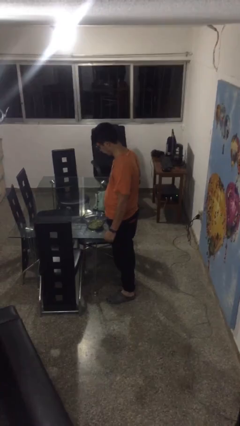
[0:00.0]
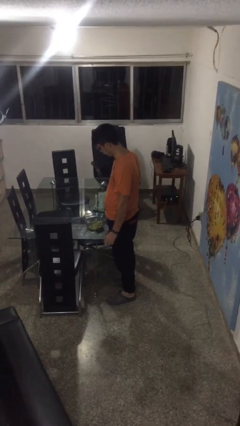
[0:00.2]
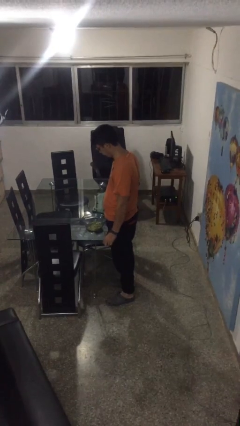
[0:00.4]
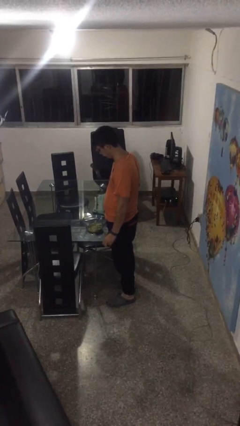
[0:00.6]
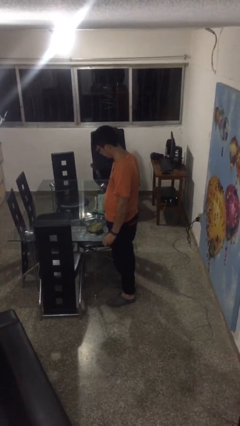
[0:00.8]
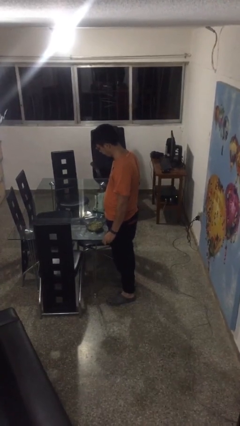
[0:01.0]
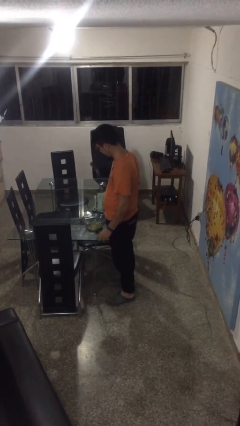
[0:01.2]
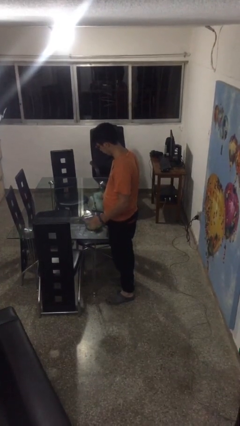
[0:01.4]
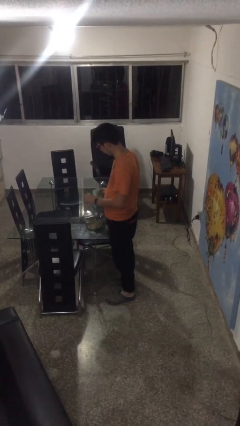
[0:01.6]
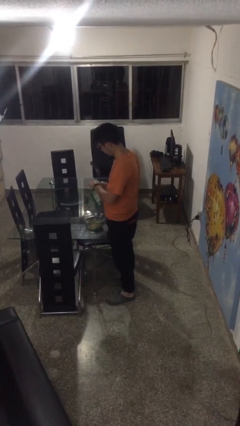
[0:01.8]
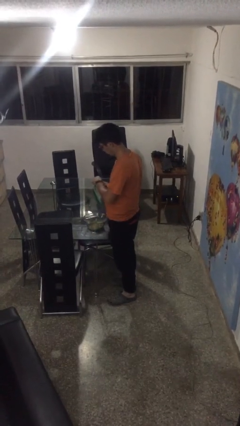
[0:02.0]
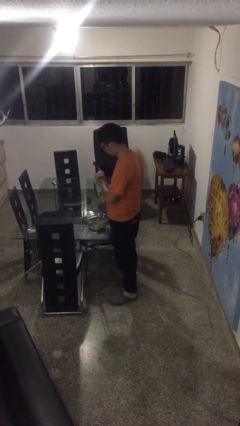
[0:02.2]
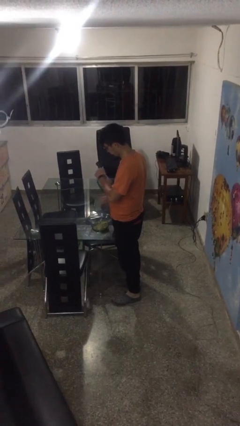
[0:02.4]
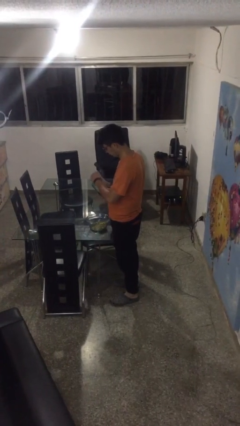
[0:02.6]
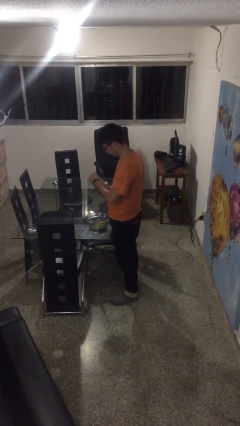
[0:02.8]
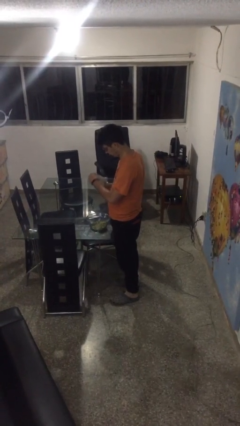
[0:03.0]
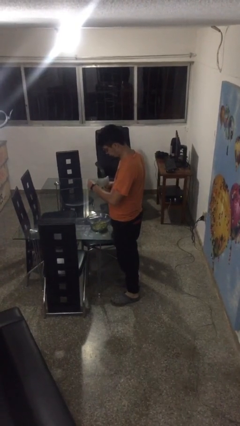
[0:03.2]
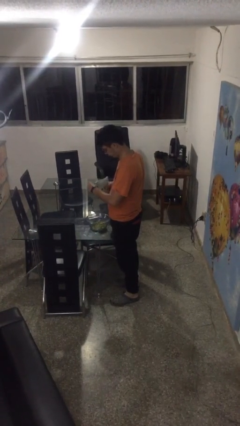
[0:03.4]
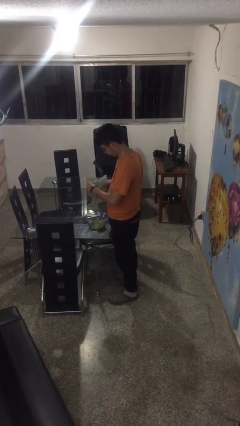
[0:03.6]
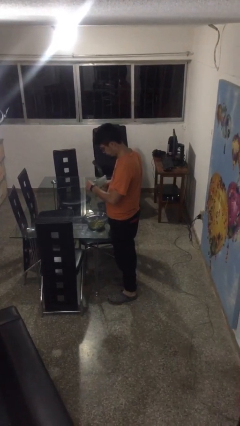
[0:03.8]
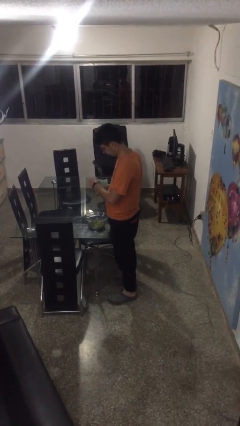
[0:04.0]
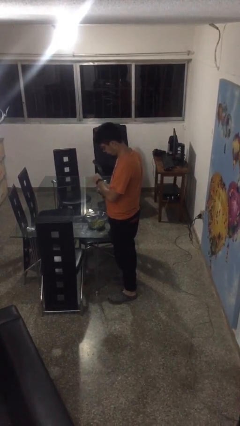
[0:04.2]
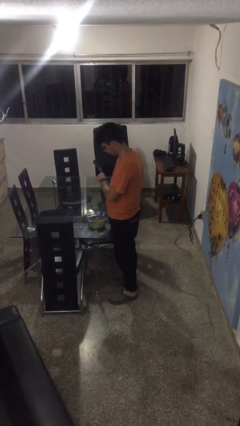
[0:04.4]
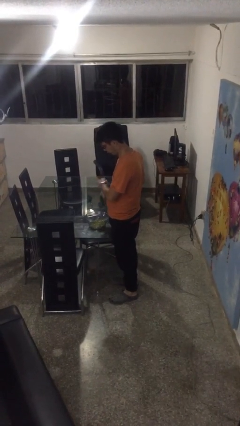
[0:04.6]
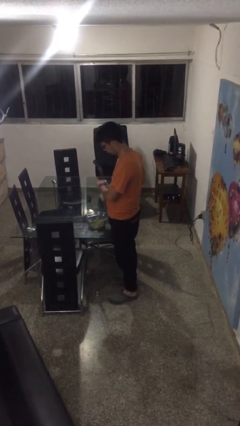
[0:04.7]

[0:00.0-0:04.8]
person pours into bowl

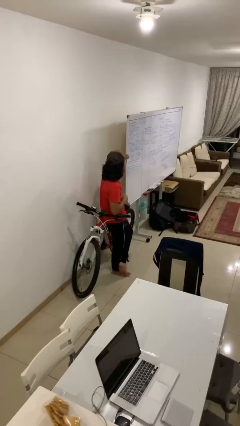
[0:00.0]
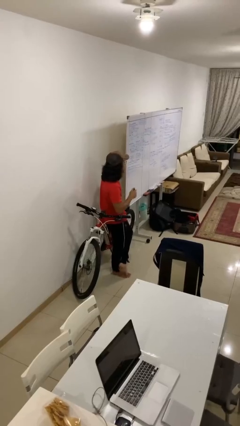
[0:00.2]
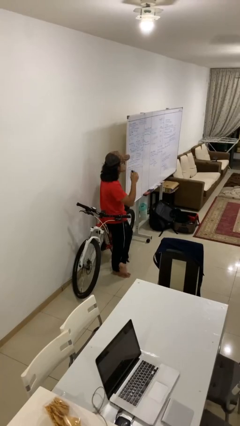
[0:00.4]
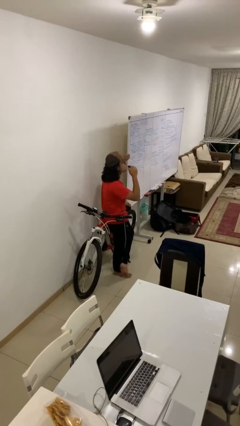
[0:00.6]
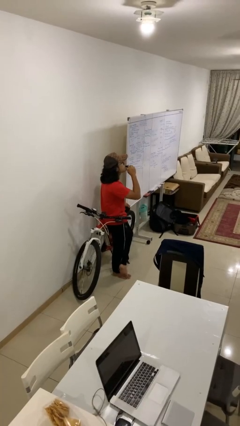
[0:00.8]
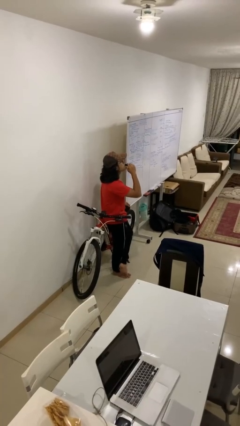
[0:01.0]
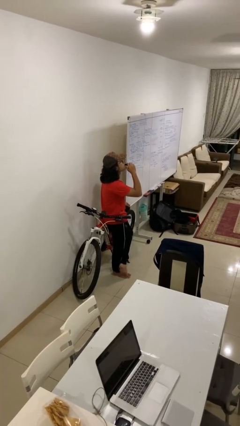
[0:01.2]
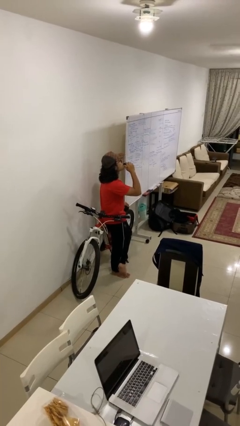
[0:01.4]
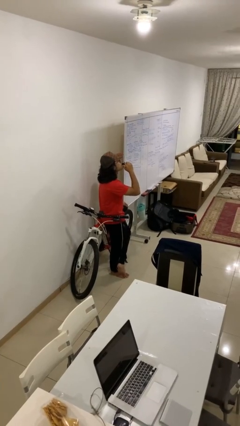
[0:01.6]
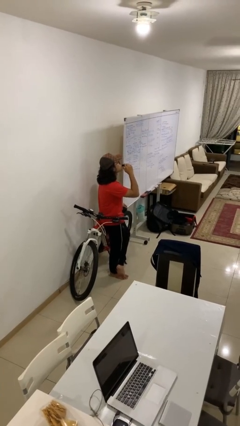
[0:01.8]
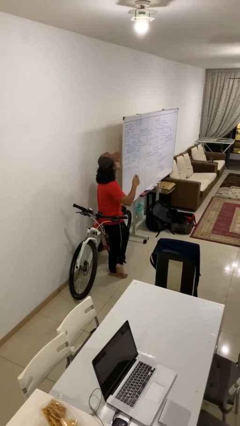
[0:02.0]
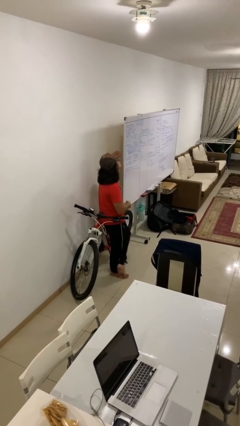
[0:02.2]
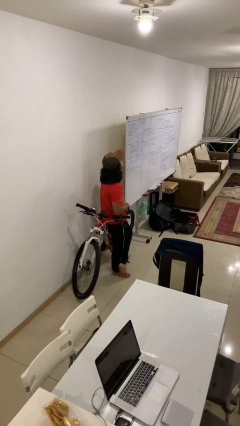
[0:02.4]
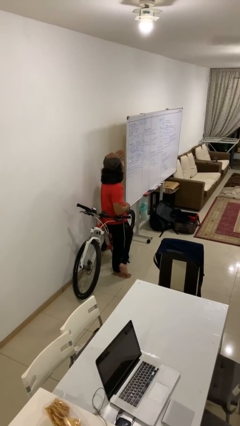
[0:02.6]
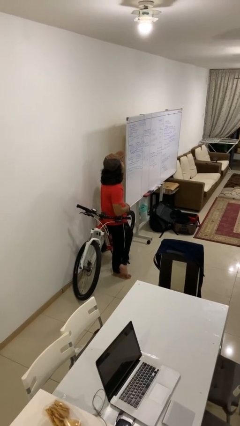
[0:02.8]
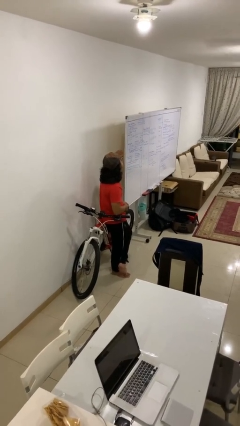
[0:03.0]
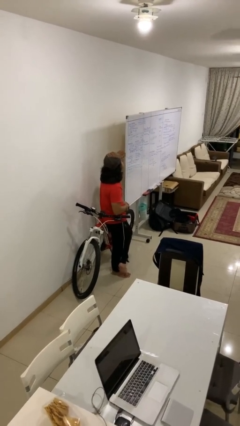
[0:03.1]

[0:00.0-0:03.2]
person vapes

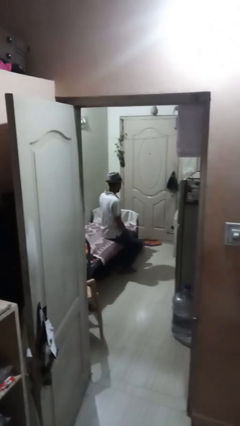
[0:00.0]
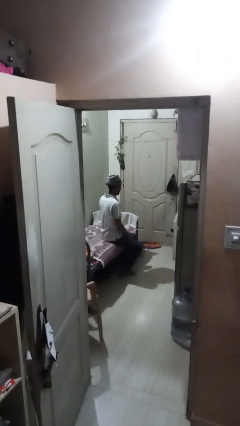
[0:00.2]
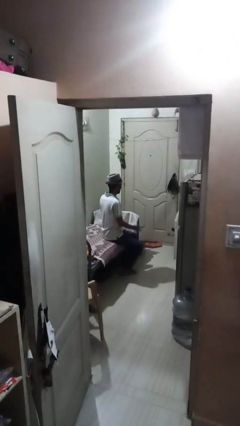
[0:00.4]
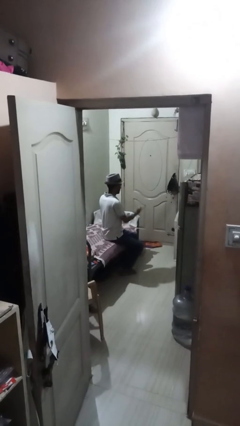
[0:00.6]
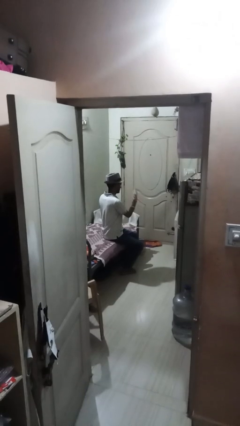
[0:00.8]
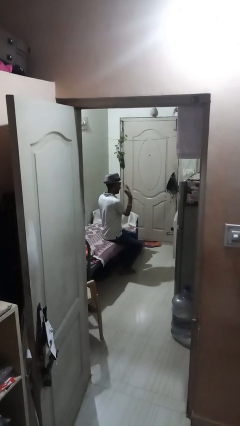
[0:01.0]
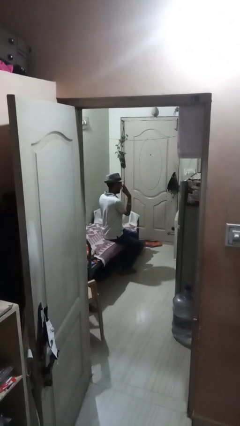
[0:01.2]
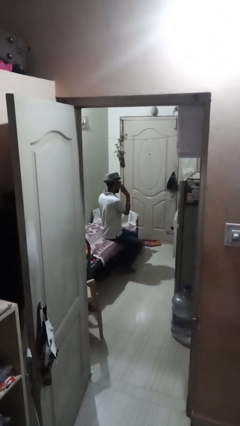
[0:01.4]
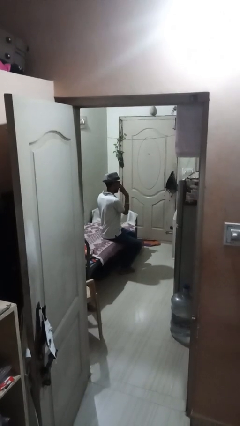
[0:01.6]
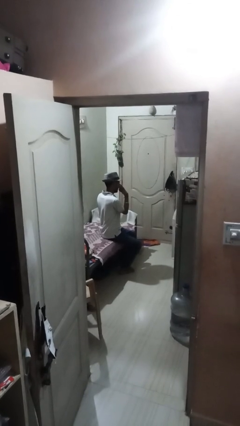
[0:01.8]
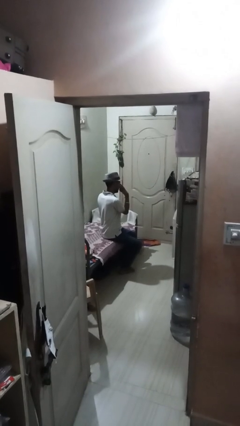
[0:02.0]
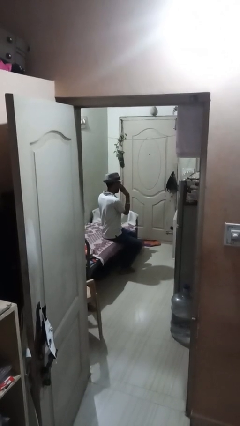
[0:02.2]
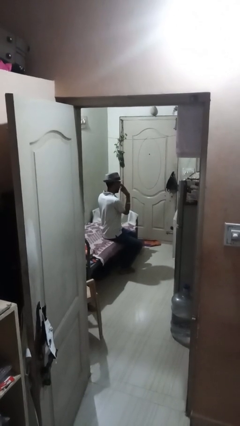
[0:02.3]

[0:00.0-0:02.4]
person gestures watch closely

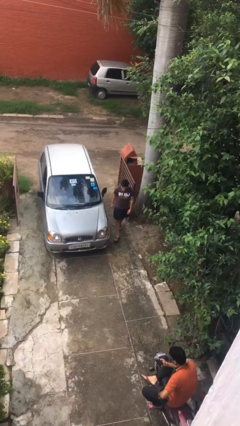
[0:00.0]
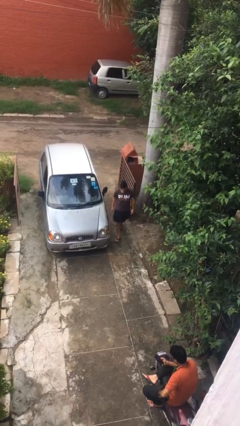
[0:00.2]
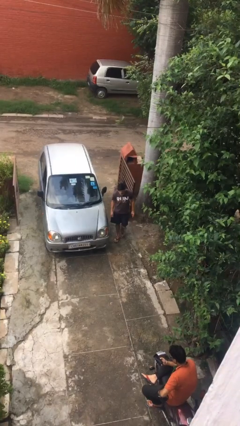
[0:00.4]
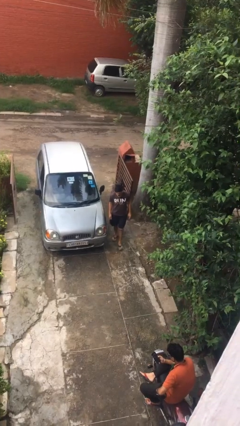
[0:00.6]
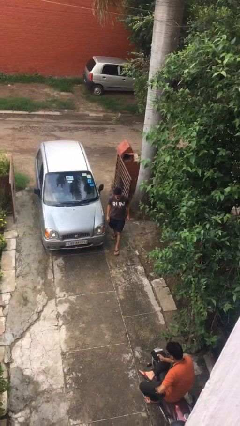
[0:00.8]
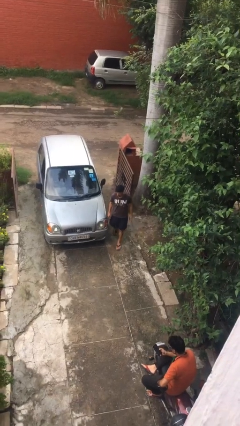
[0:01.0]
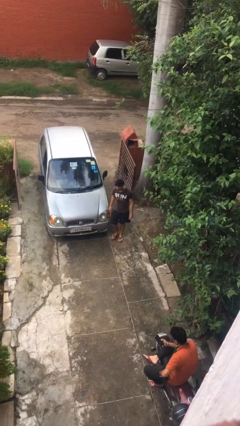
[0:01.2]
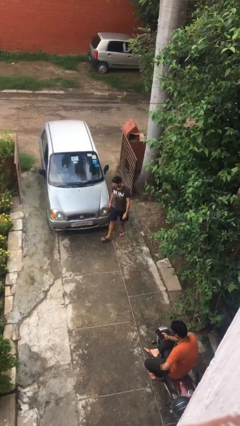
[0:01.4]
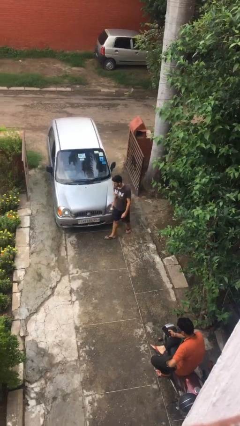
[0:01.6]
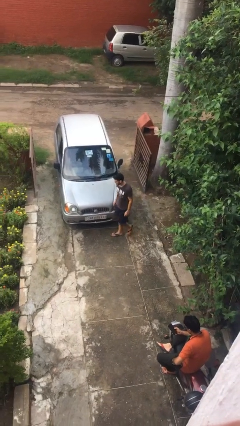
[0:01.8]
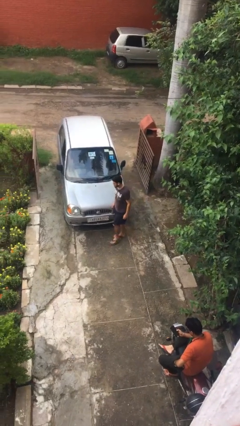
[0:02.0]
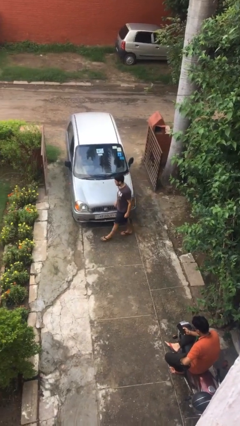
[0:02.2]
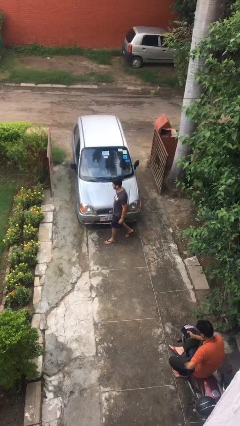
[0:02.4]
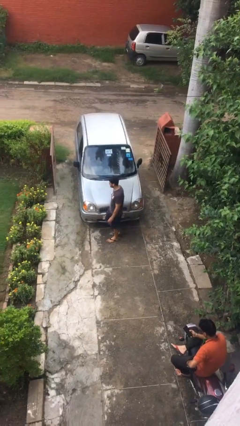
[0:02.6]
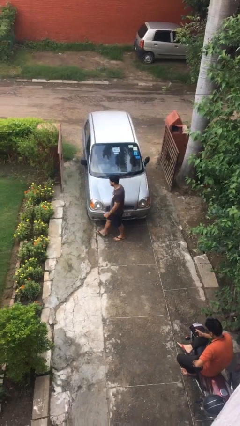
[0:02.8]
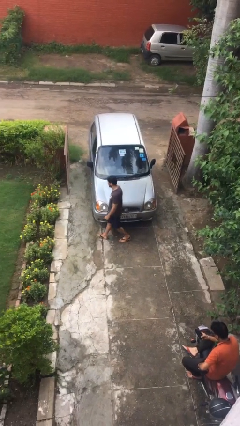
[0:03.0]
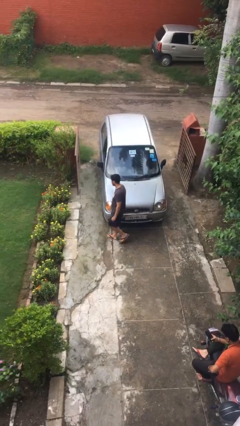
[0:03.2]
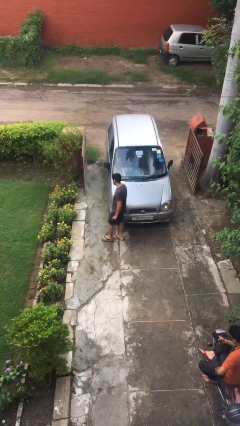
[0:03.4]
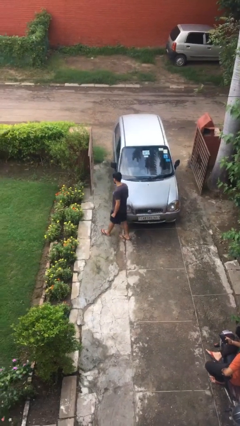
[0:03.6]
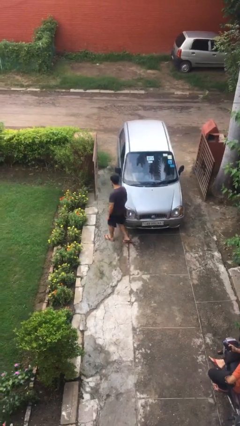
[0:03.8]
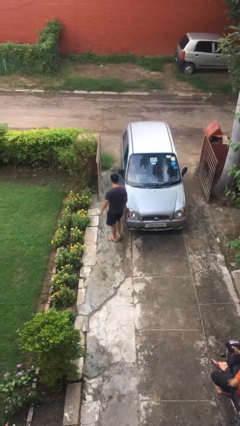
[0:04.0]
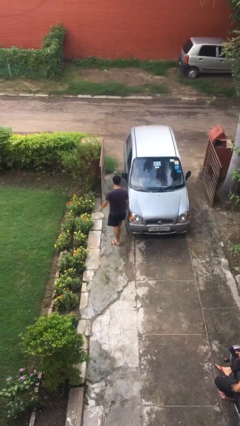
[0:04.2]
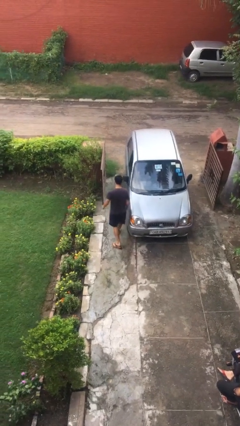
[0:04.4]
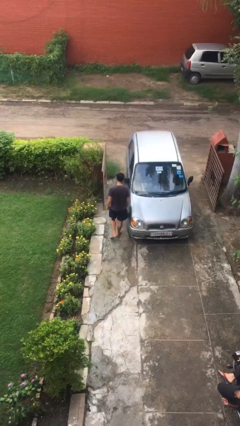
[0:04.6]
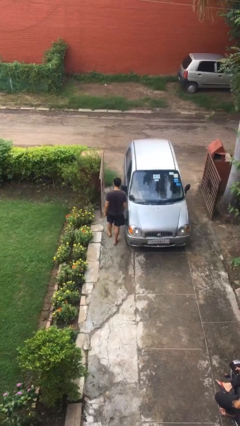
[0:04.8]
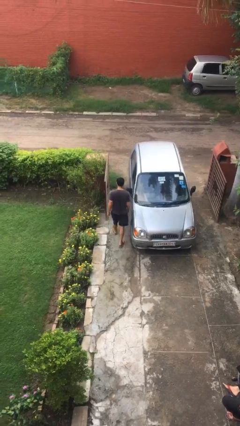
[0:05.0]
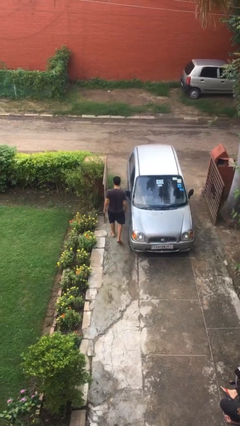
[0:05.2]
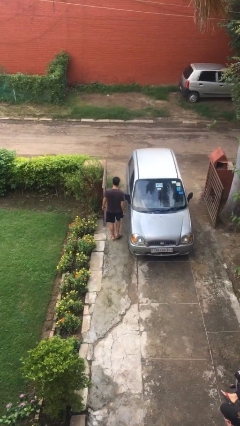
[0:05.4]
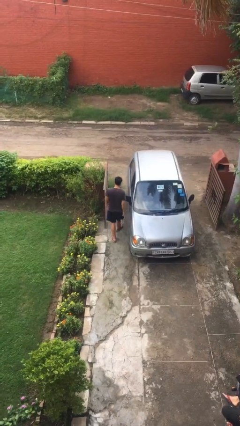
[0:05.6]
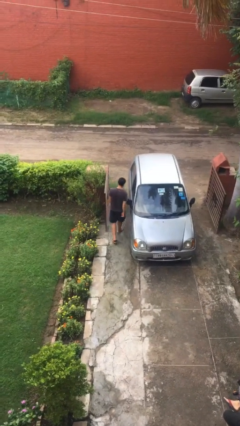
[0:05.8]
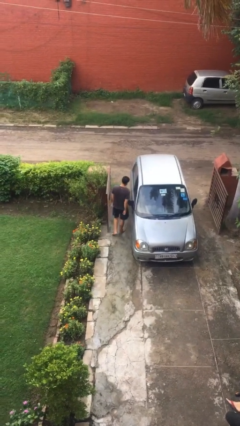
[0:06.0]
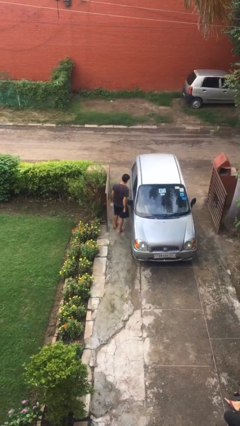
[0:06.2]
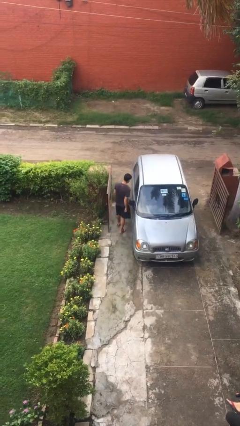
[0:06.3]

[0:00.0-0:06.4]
person walks around car

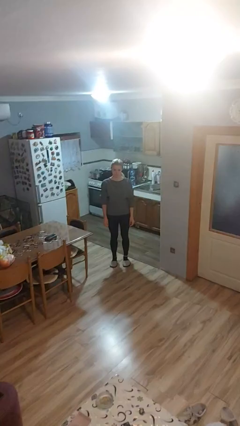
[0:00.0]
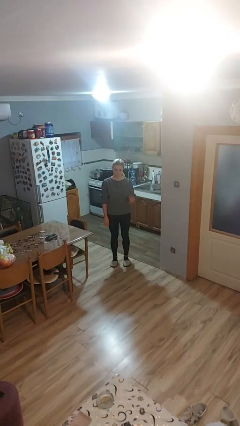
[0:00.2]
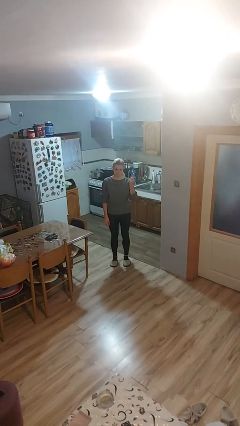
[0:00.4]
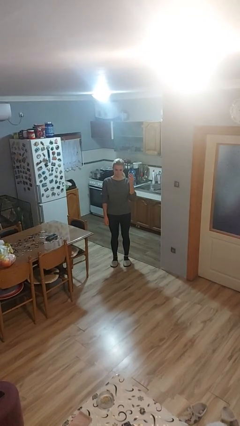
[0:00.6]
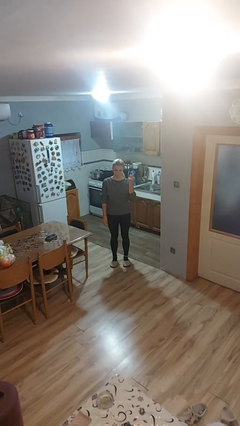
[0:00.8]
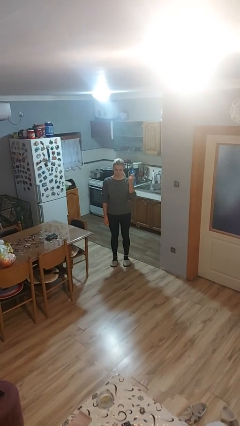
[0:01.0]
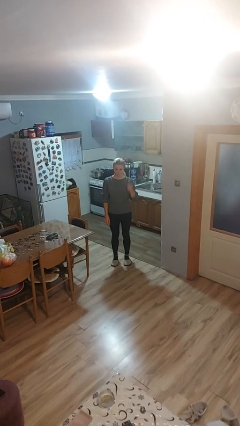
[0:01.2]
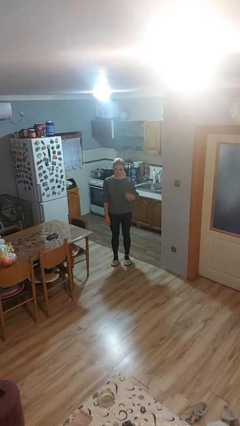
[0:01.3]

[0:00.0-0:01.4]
person snaps fingers
